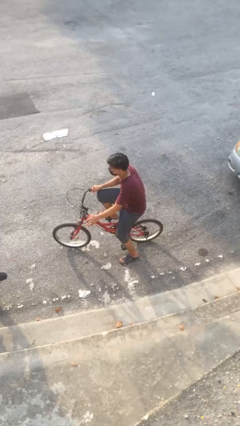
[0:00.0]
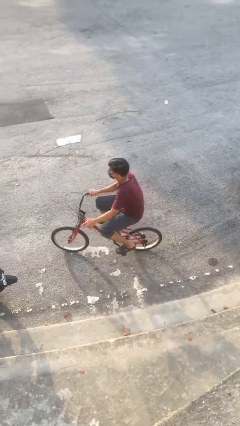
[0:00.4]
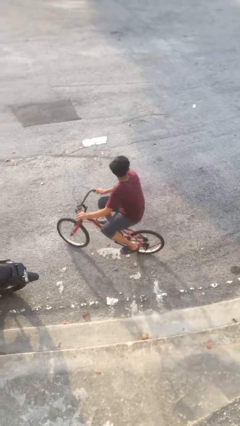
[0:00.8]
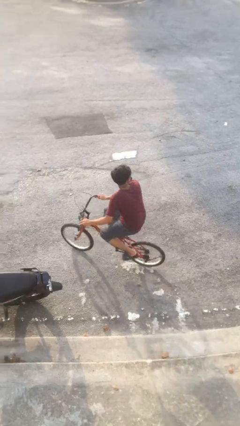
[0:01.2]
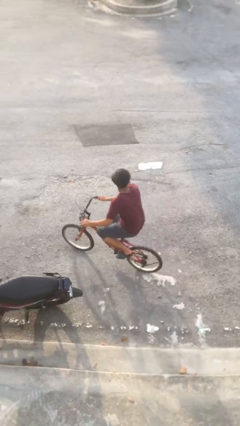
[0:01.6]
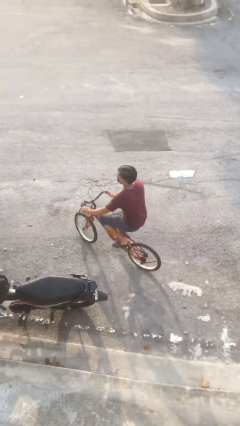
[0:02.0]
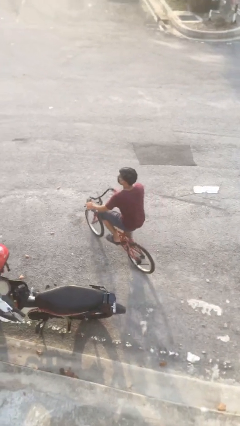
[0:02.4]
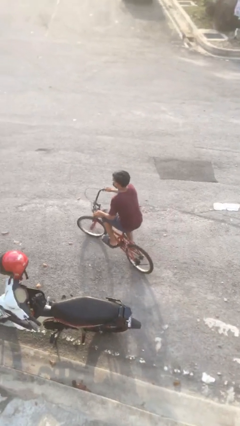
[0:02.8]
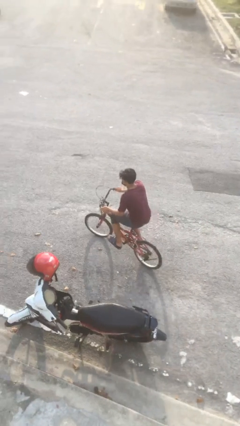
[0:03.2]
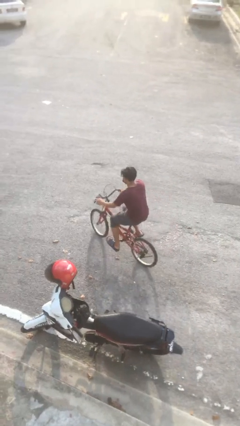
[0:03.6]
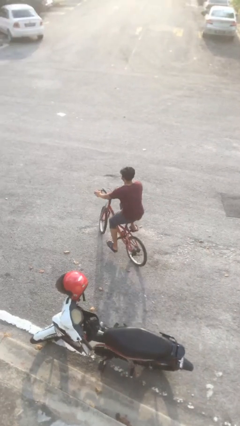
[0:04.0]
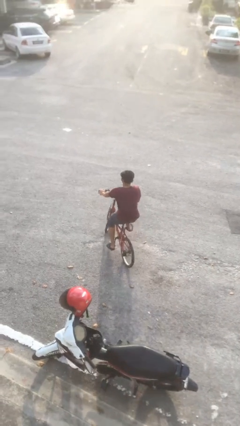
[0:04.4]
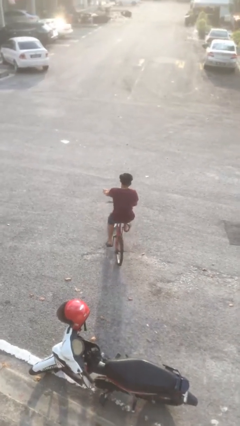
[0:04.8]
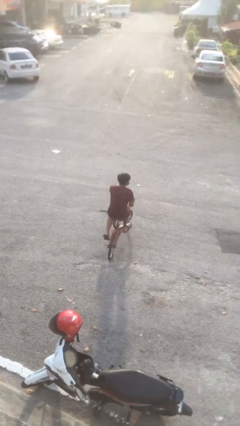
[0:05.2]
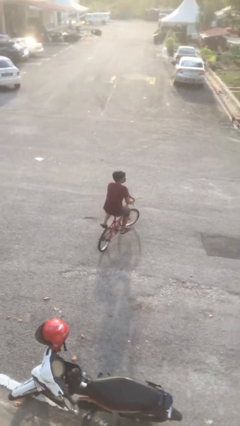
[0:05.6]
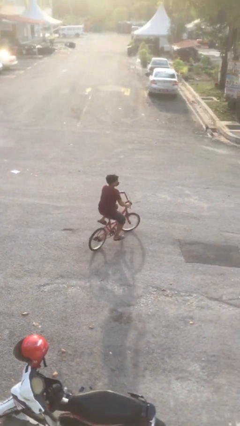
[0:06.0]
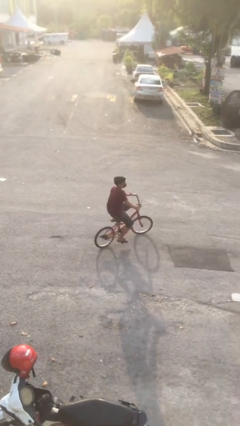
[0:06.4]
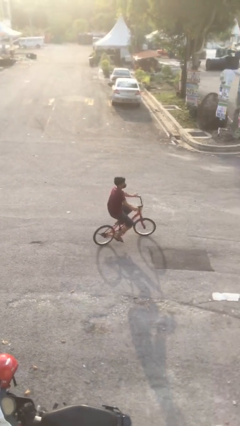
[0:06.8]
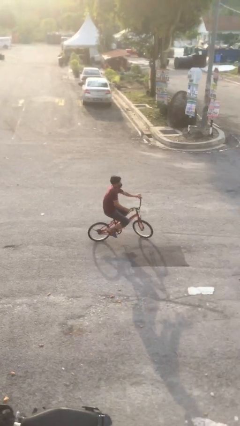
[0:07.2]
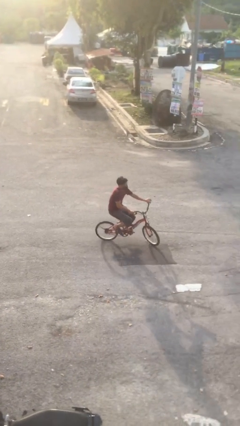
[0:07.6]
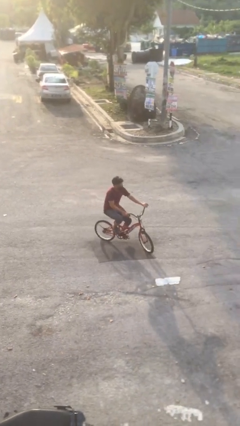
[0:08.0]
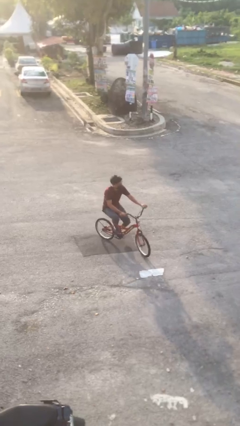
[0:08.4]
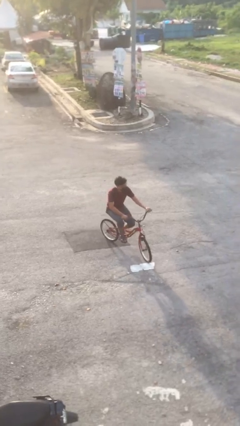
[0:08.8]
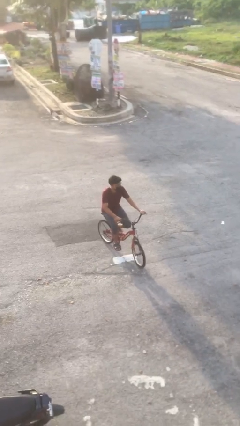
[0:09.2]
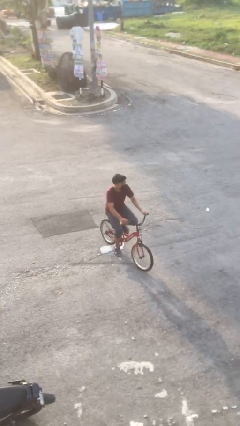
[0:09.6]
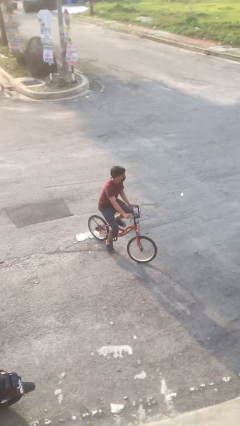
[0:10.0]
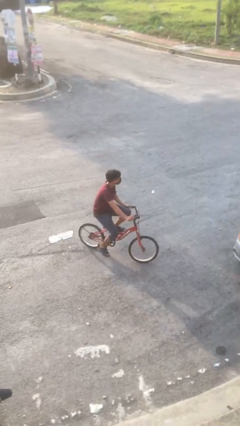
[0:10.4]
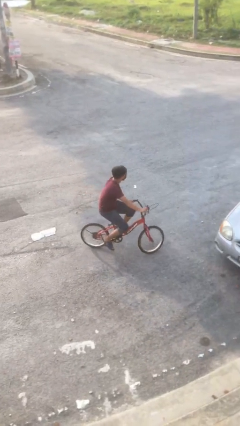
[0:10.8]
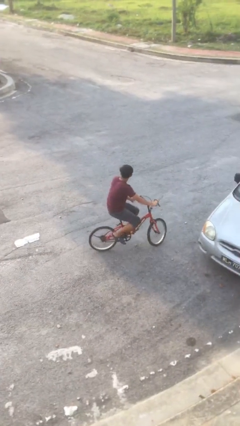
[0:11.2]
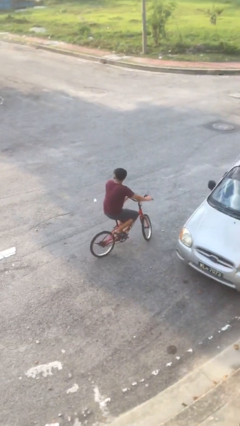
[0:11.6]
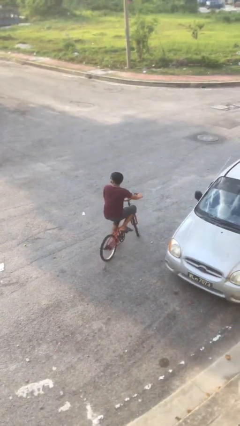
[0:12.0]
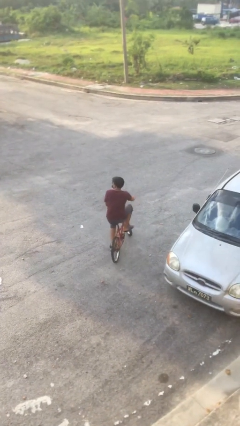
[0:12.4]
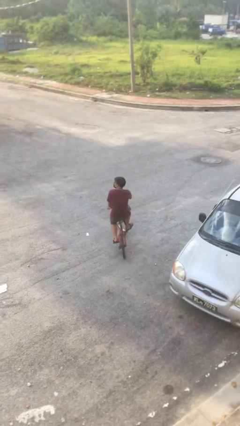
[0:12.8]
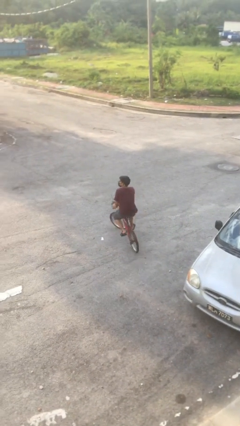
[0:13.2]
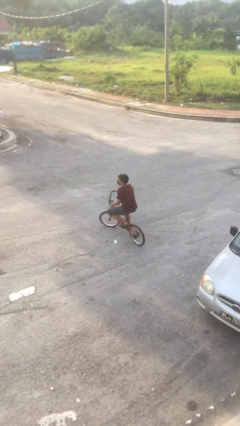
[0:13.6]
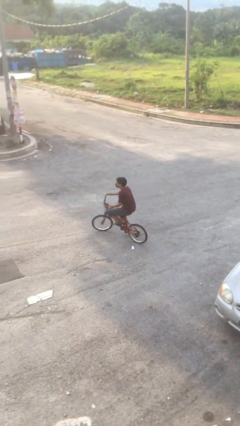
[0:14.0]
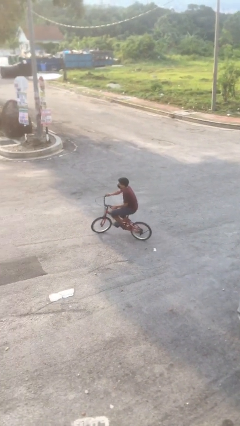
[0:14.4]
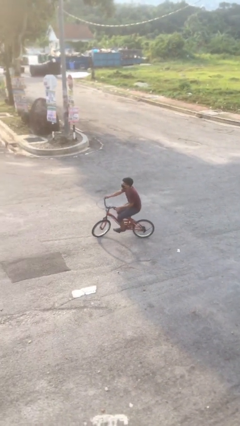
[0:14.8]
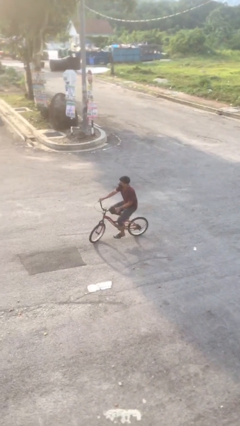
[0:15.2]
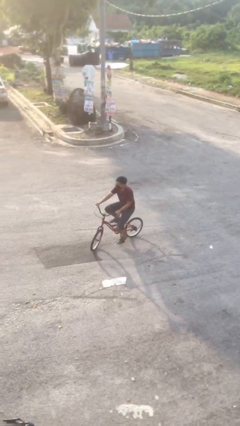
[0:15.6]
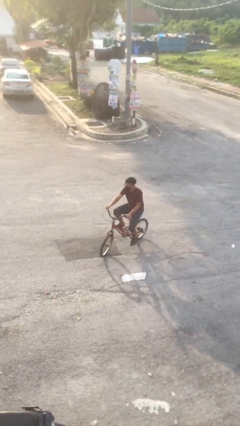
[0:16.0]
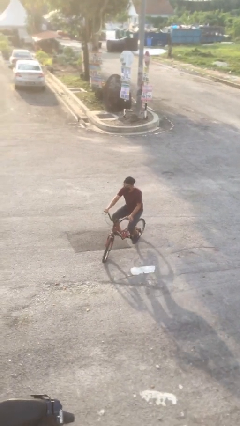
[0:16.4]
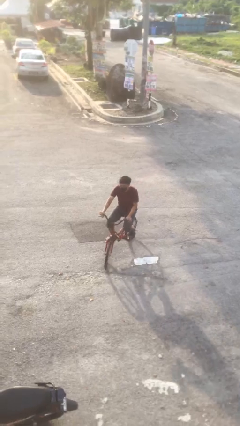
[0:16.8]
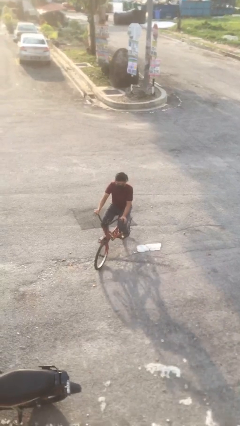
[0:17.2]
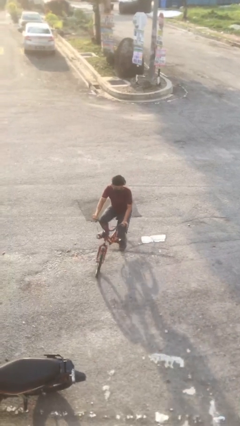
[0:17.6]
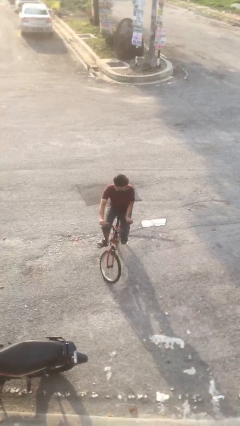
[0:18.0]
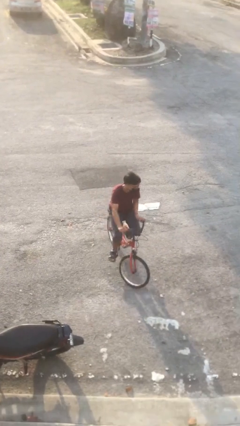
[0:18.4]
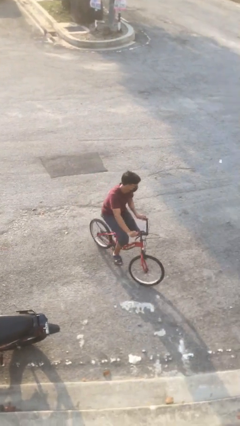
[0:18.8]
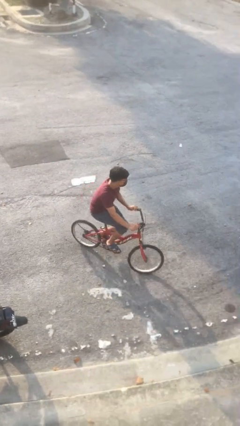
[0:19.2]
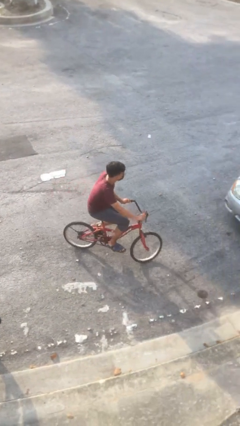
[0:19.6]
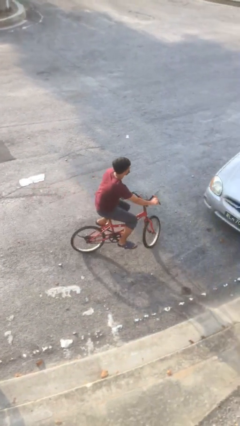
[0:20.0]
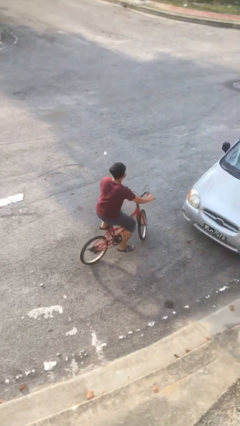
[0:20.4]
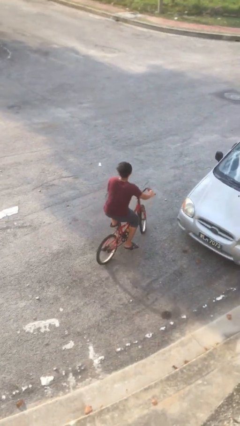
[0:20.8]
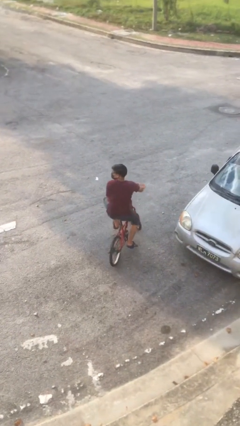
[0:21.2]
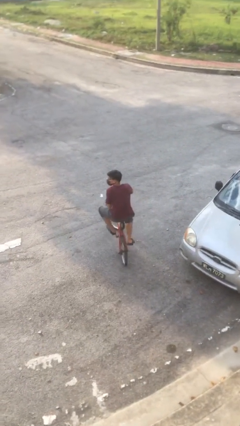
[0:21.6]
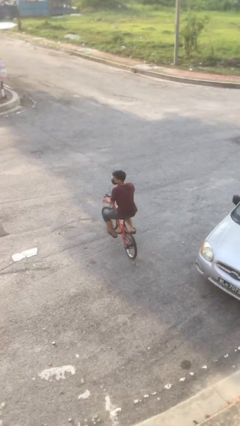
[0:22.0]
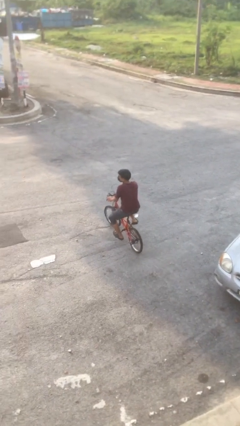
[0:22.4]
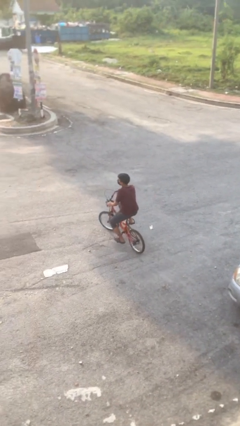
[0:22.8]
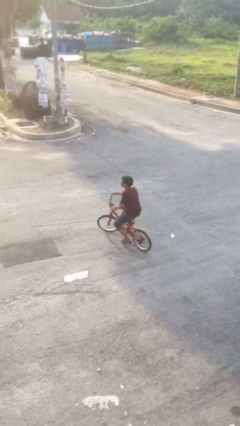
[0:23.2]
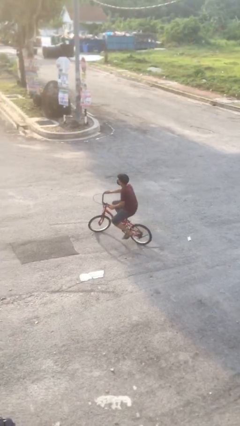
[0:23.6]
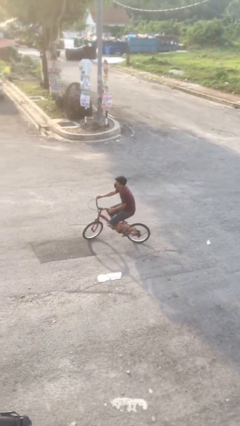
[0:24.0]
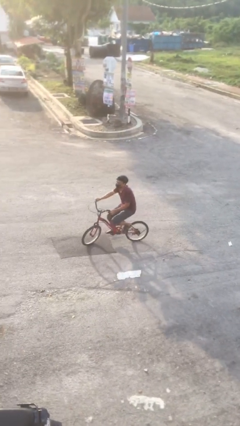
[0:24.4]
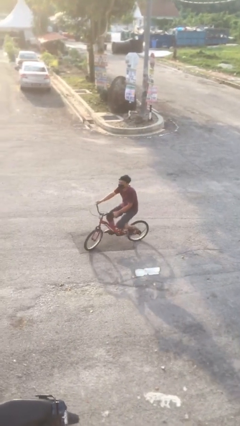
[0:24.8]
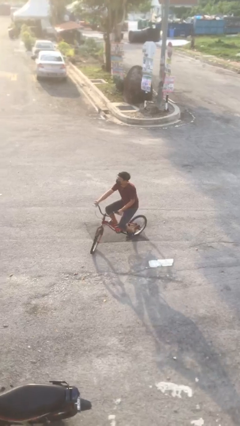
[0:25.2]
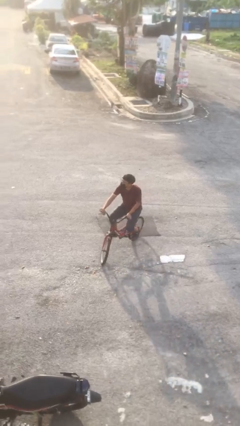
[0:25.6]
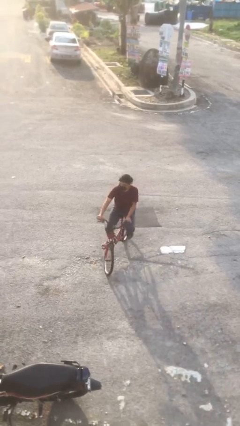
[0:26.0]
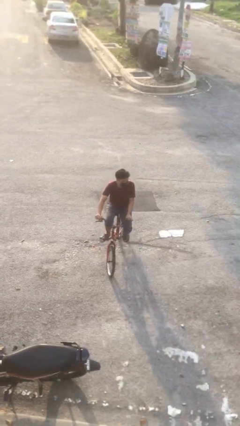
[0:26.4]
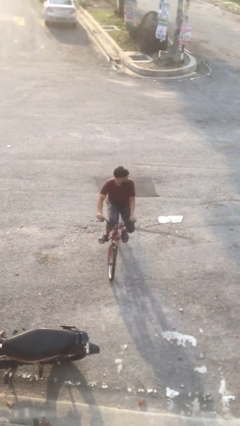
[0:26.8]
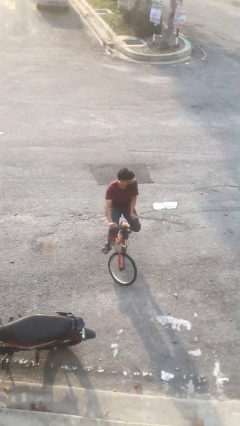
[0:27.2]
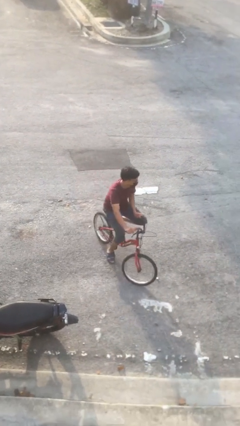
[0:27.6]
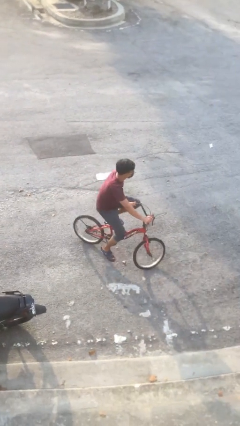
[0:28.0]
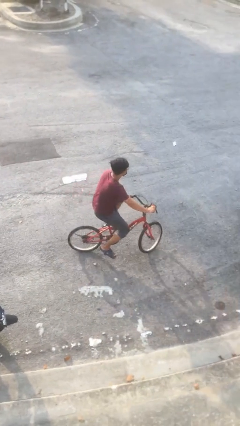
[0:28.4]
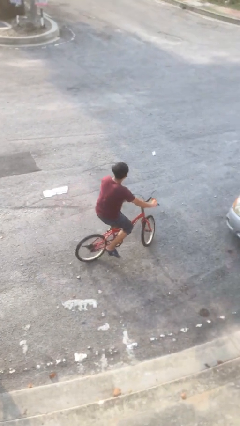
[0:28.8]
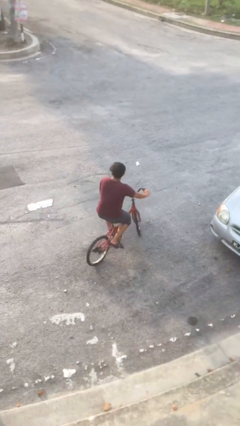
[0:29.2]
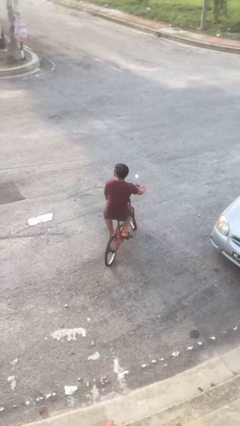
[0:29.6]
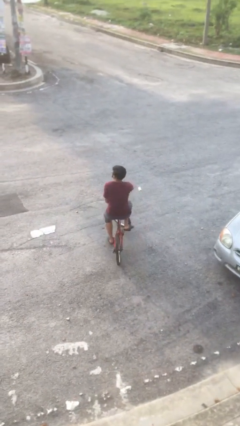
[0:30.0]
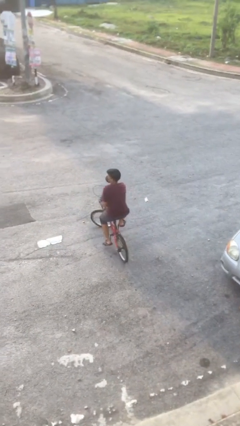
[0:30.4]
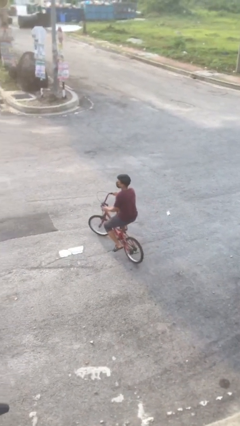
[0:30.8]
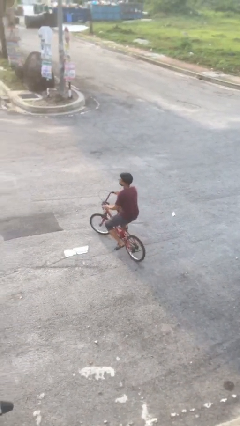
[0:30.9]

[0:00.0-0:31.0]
person rides bicycle

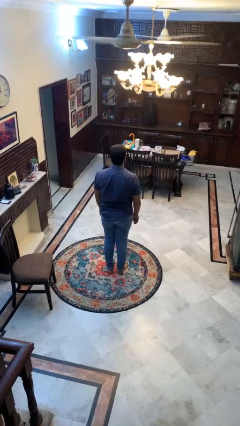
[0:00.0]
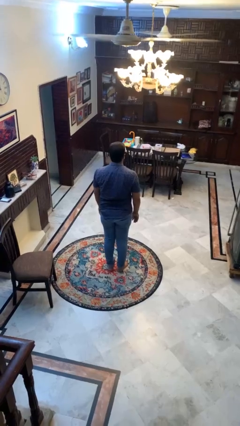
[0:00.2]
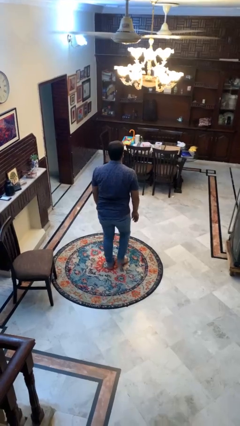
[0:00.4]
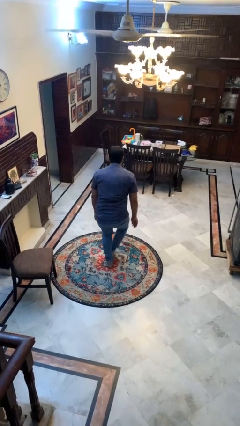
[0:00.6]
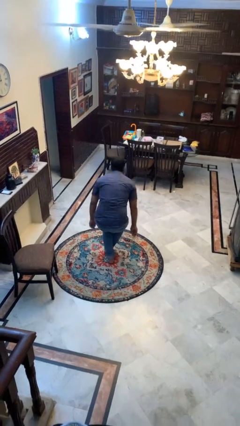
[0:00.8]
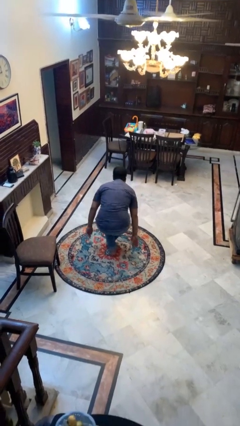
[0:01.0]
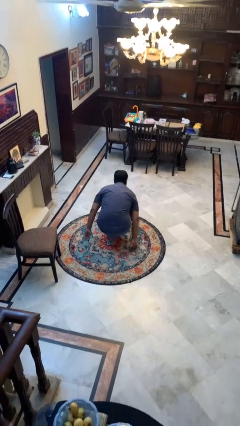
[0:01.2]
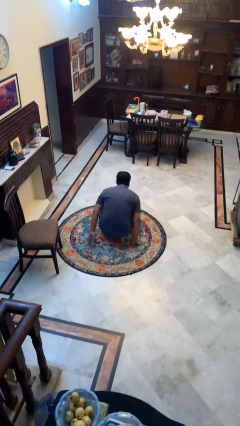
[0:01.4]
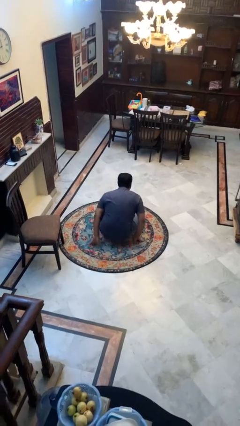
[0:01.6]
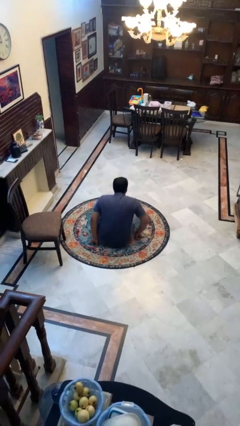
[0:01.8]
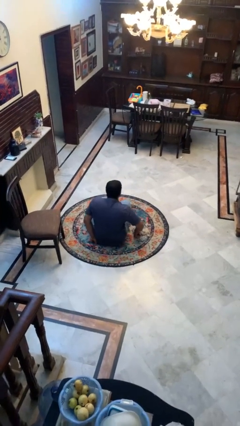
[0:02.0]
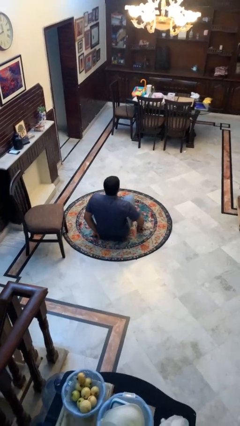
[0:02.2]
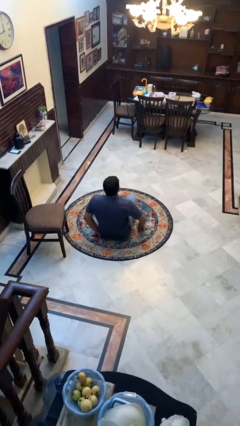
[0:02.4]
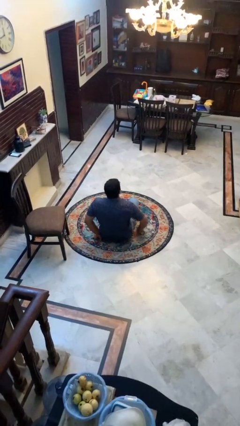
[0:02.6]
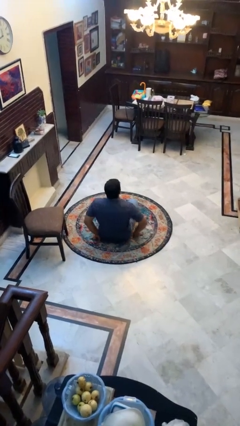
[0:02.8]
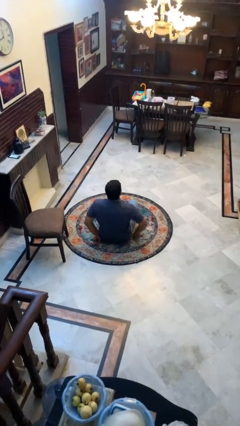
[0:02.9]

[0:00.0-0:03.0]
person sits crisscross
